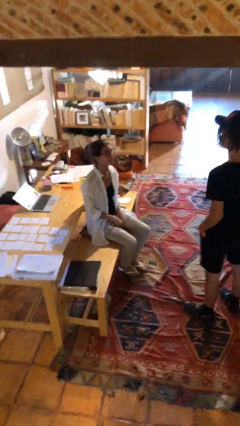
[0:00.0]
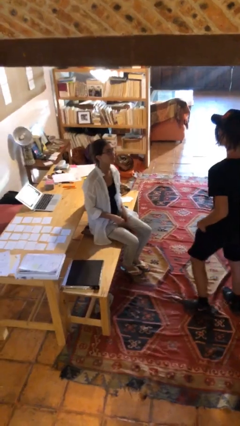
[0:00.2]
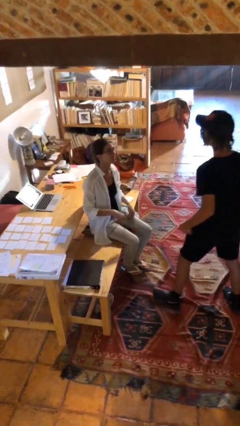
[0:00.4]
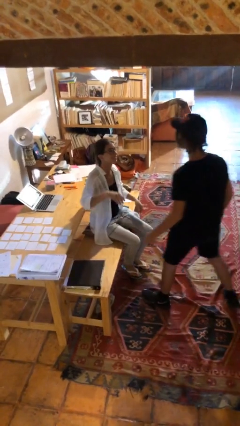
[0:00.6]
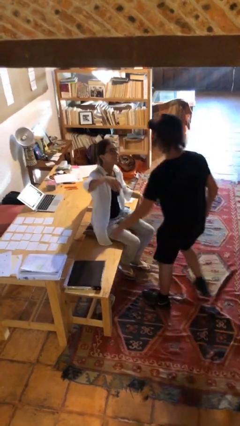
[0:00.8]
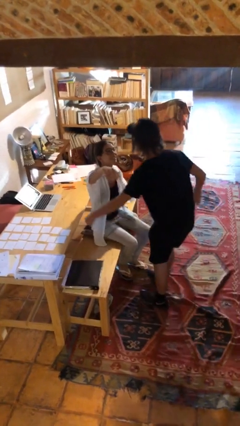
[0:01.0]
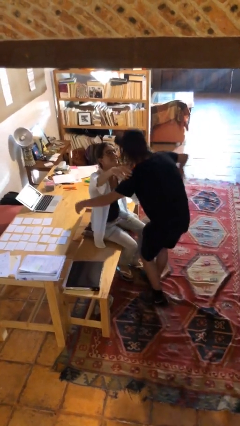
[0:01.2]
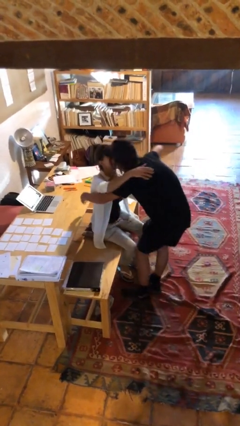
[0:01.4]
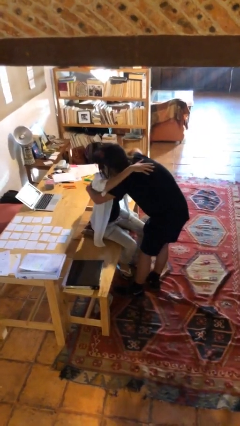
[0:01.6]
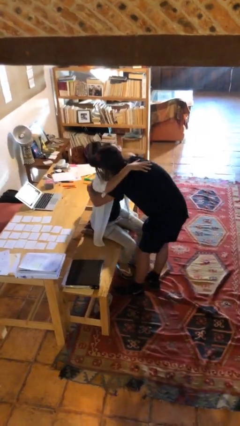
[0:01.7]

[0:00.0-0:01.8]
person embraces person

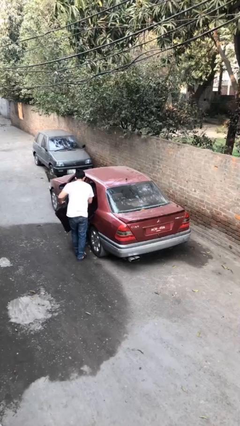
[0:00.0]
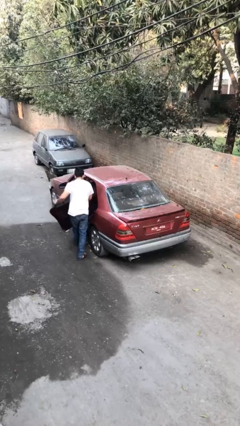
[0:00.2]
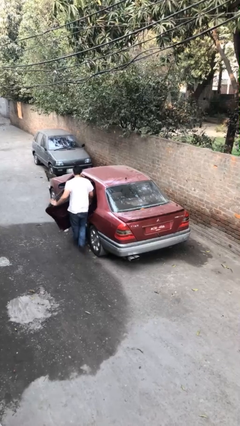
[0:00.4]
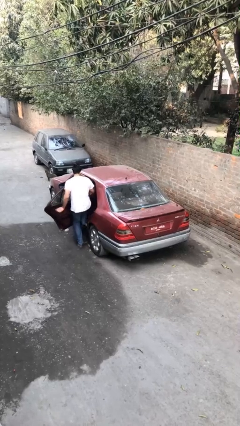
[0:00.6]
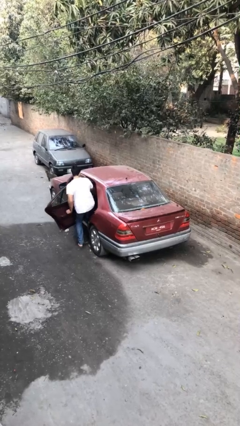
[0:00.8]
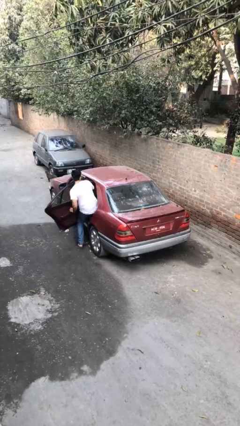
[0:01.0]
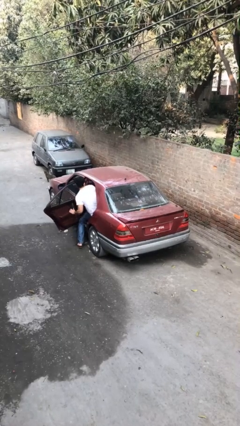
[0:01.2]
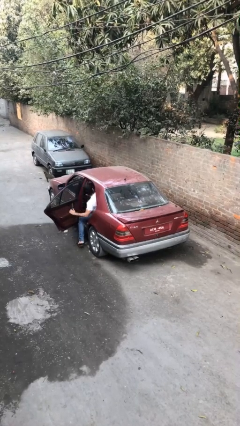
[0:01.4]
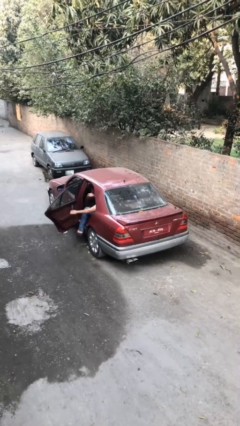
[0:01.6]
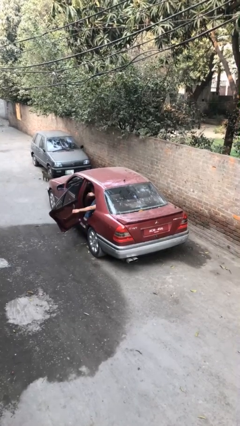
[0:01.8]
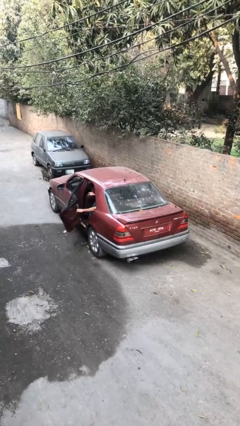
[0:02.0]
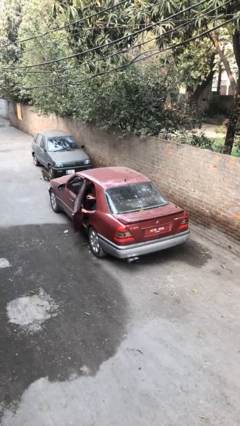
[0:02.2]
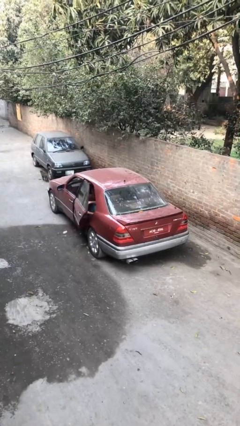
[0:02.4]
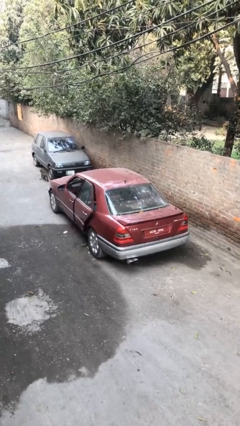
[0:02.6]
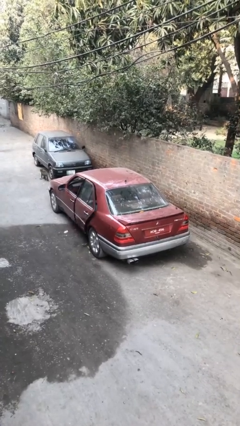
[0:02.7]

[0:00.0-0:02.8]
car picks up person

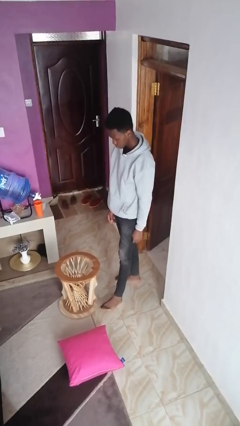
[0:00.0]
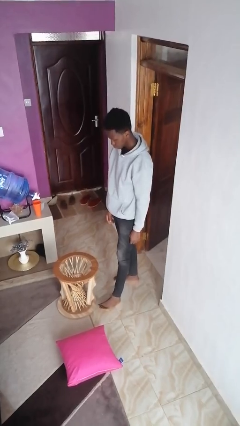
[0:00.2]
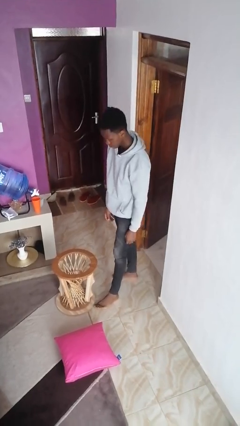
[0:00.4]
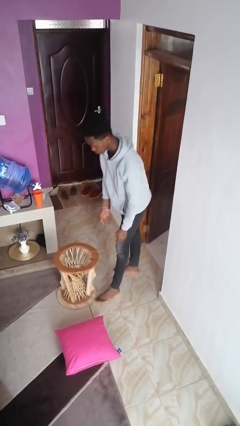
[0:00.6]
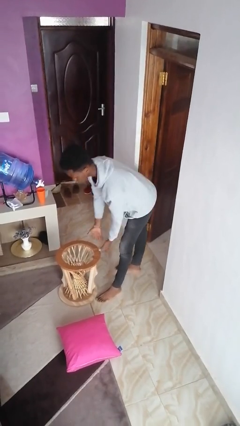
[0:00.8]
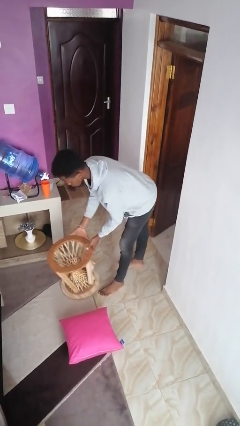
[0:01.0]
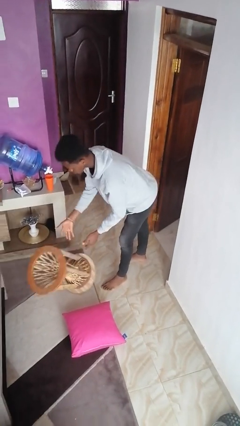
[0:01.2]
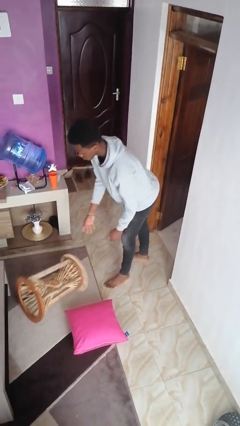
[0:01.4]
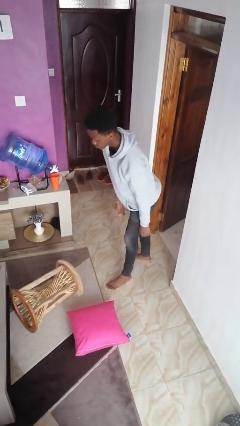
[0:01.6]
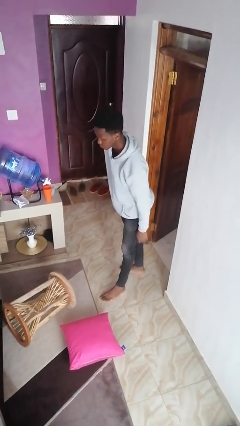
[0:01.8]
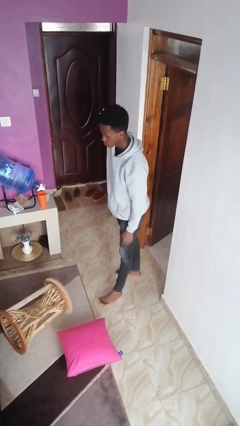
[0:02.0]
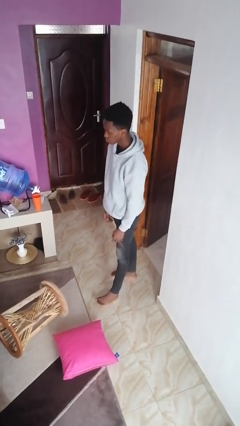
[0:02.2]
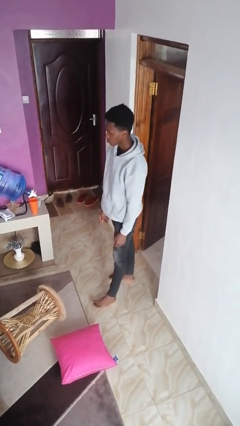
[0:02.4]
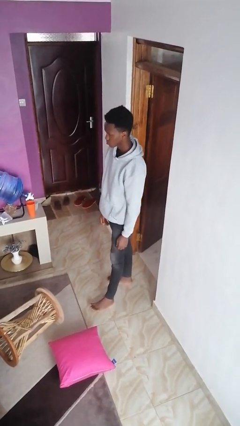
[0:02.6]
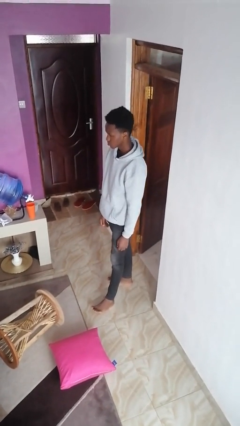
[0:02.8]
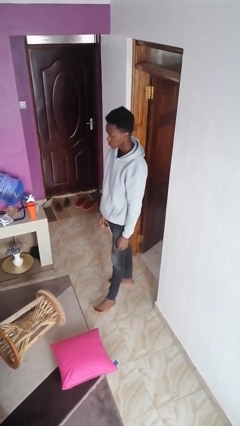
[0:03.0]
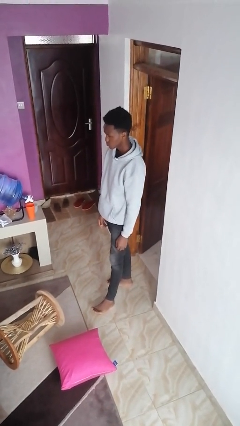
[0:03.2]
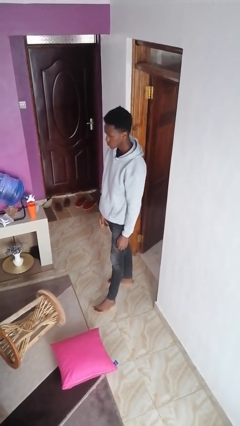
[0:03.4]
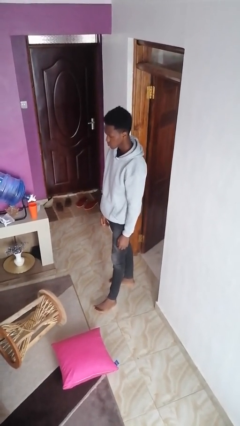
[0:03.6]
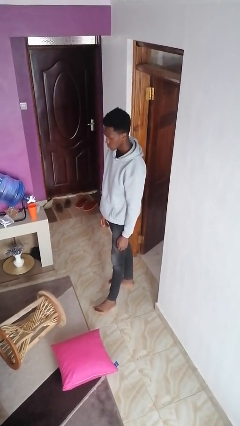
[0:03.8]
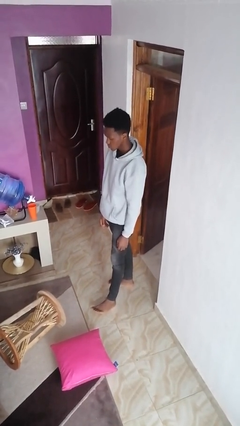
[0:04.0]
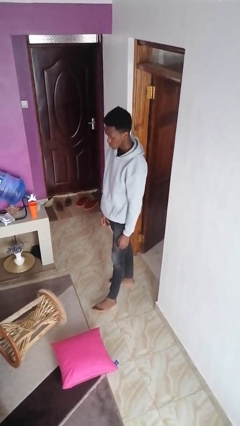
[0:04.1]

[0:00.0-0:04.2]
person knocks over furniture

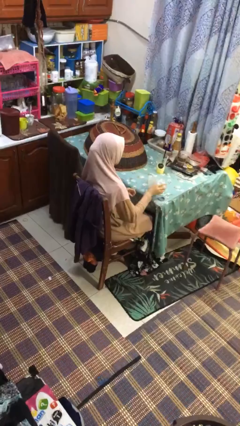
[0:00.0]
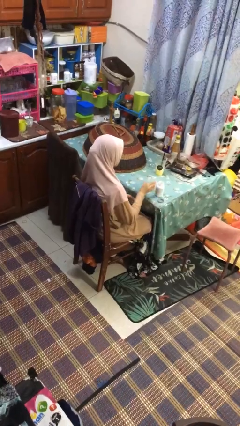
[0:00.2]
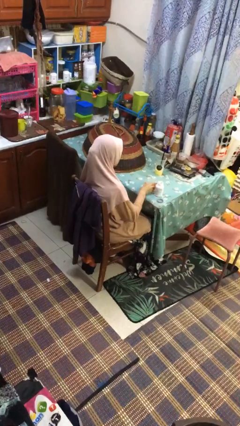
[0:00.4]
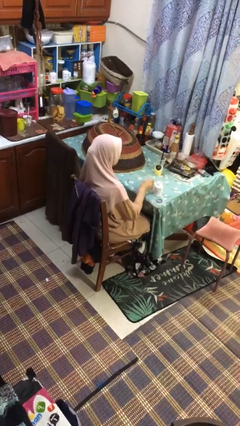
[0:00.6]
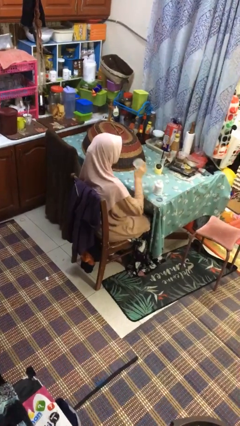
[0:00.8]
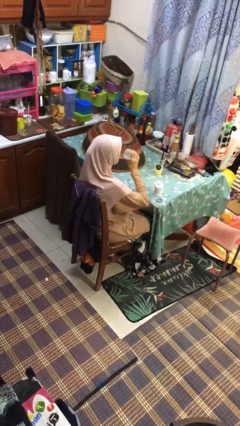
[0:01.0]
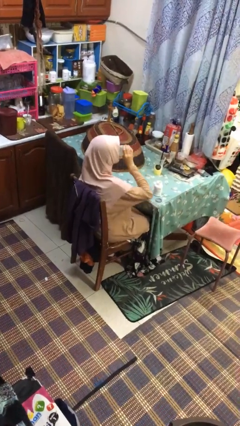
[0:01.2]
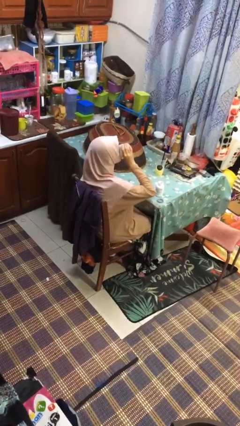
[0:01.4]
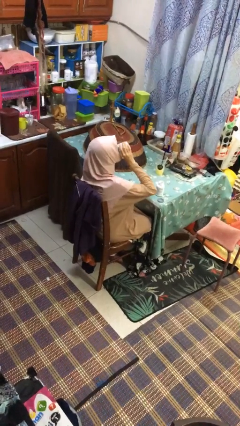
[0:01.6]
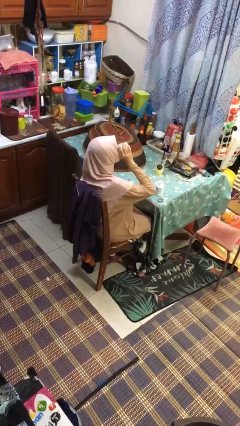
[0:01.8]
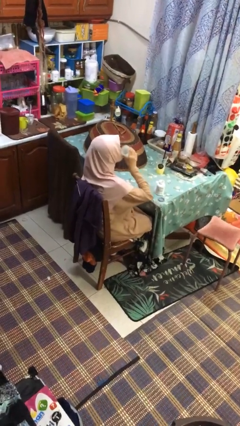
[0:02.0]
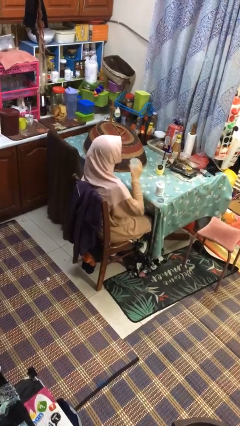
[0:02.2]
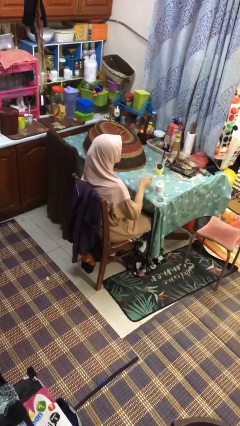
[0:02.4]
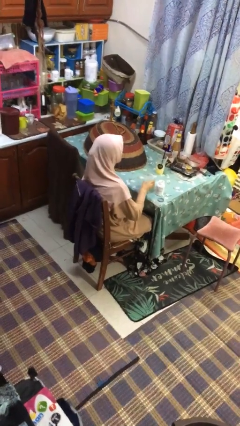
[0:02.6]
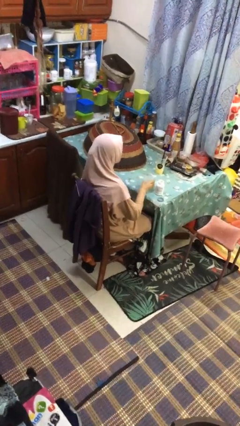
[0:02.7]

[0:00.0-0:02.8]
person drinks from cup

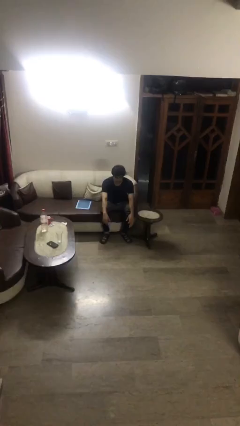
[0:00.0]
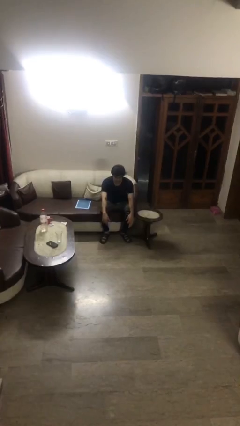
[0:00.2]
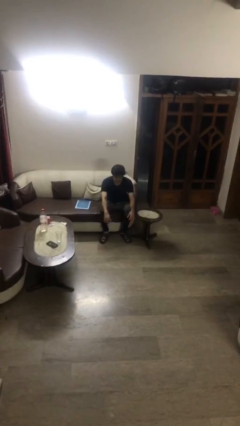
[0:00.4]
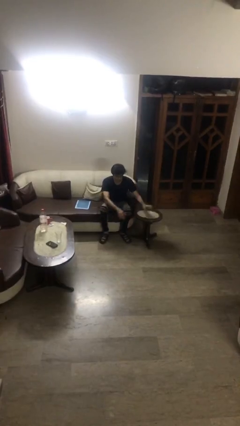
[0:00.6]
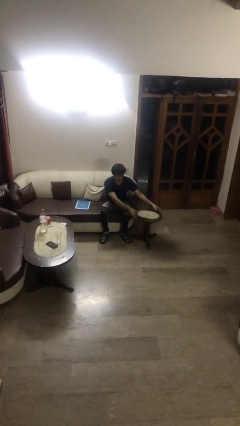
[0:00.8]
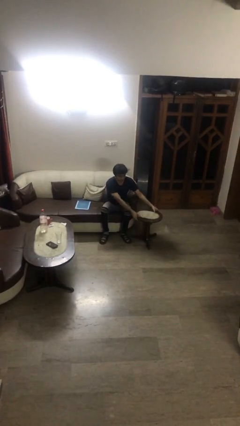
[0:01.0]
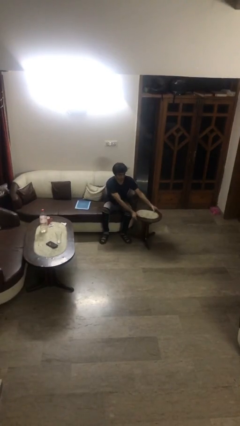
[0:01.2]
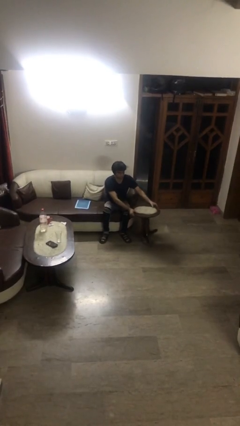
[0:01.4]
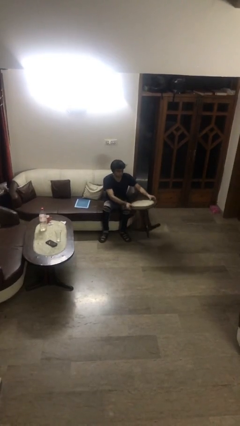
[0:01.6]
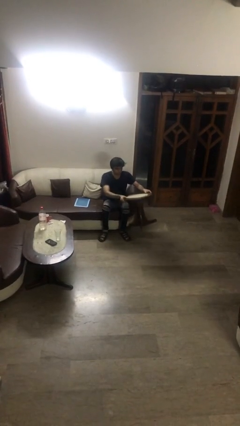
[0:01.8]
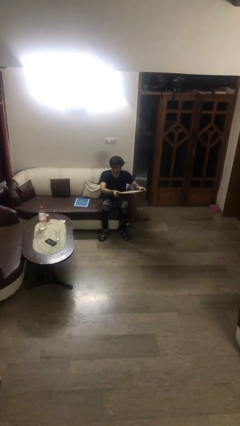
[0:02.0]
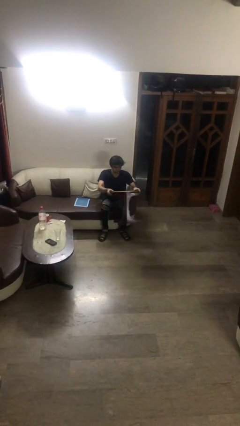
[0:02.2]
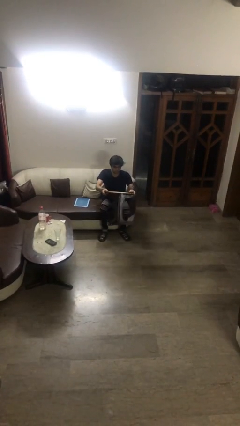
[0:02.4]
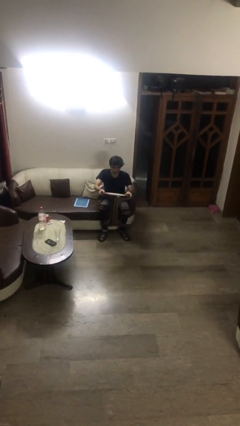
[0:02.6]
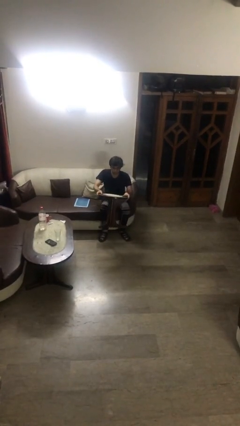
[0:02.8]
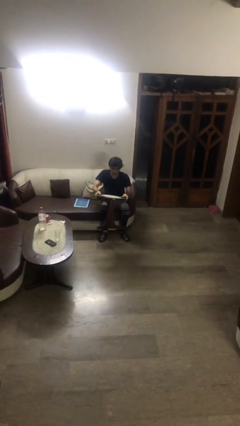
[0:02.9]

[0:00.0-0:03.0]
person picks up object from floor

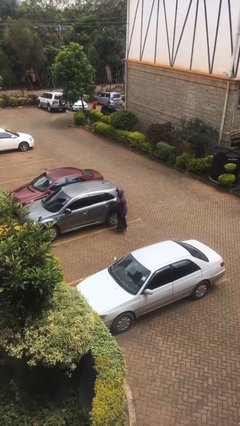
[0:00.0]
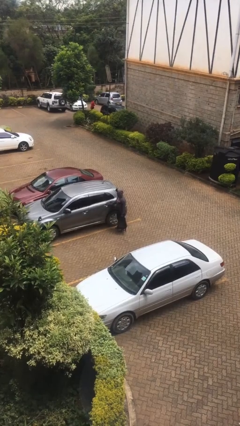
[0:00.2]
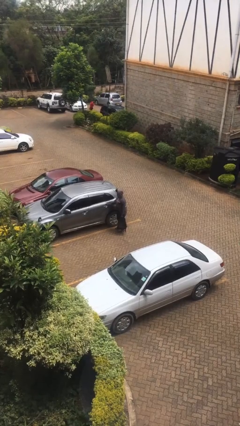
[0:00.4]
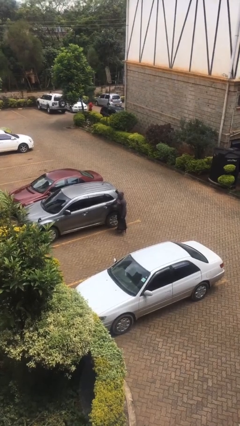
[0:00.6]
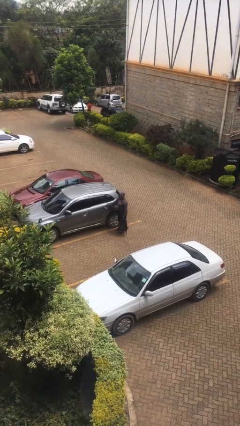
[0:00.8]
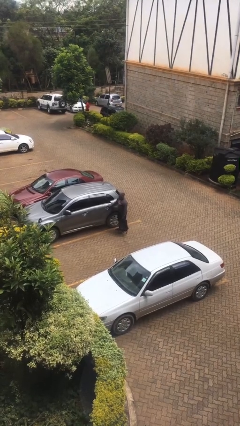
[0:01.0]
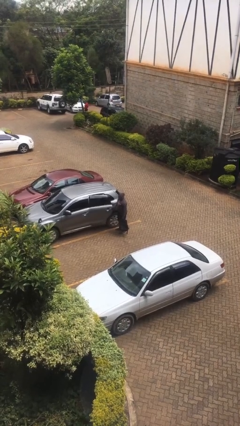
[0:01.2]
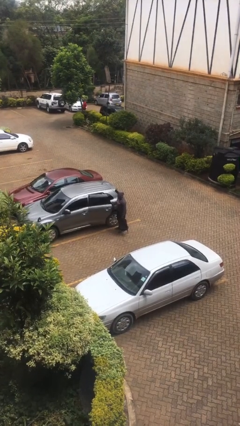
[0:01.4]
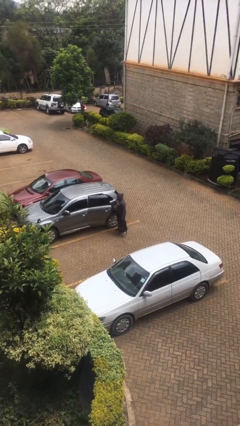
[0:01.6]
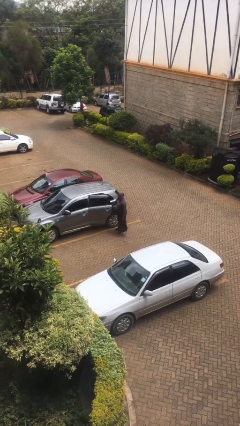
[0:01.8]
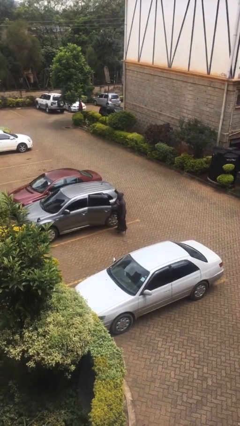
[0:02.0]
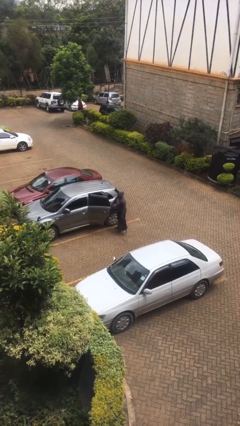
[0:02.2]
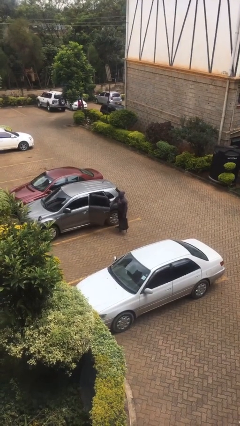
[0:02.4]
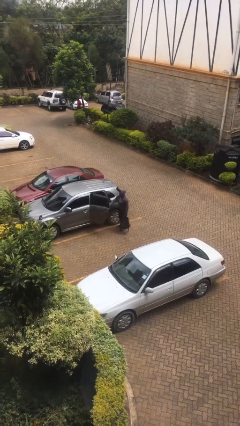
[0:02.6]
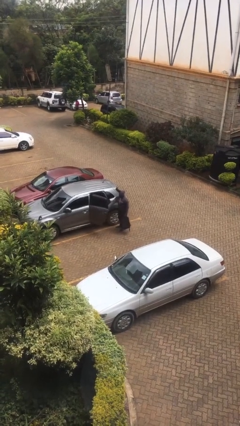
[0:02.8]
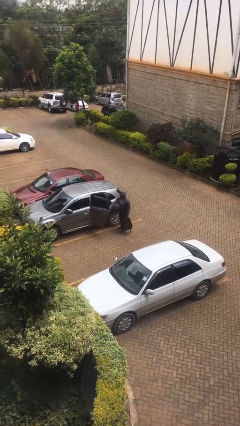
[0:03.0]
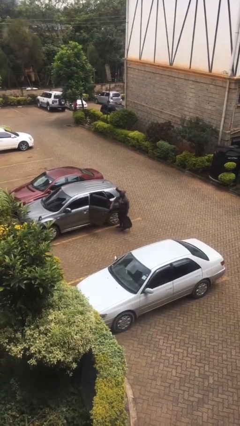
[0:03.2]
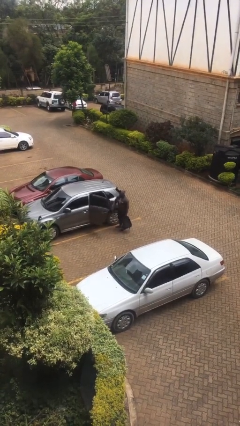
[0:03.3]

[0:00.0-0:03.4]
person opens car door
